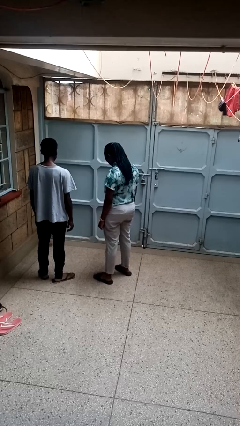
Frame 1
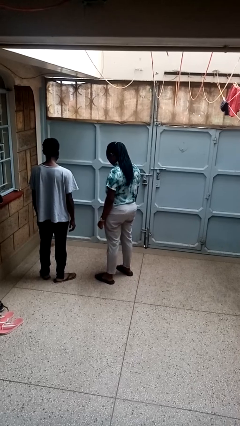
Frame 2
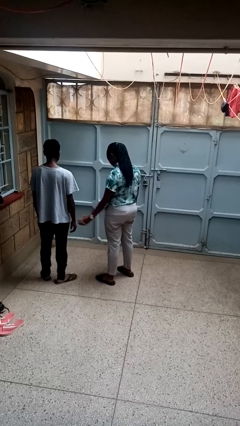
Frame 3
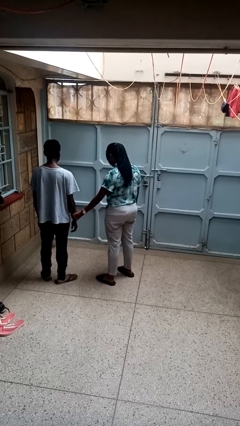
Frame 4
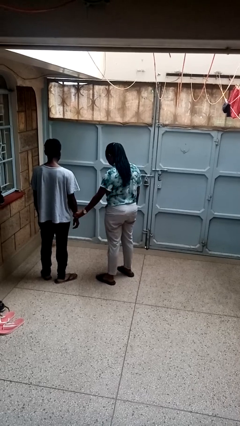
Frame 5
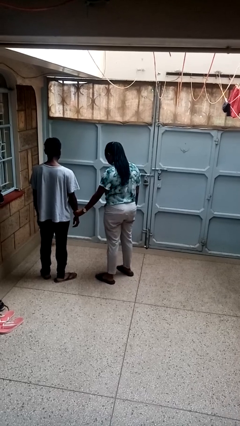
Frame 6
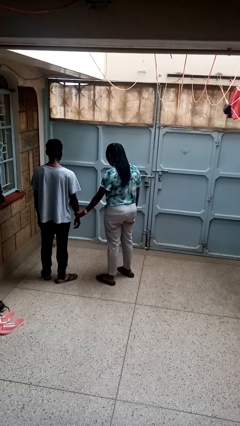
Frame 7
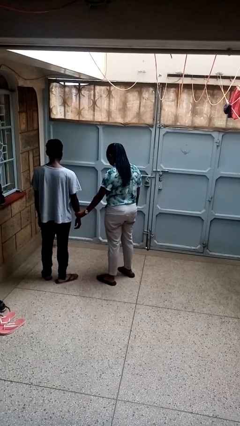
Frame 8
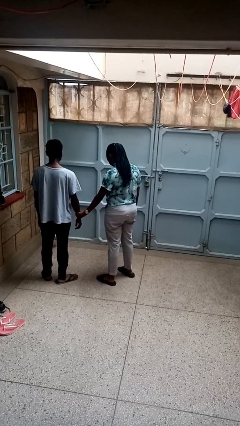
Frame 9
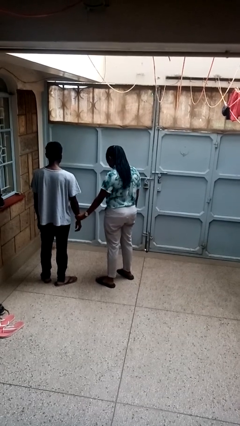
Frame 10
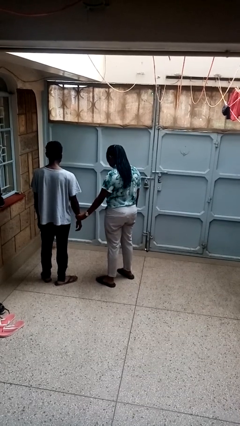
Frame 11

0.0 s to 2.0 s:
person grabs person by forearm

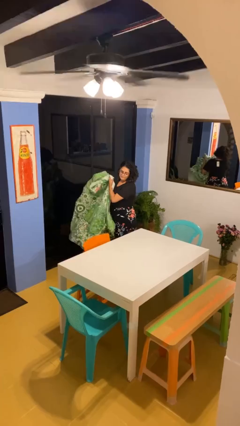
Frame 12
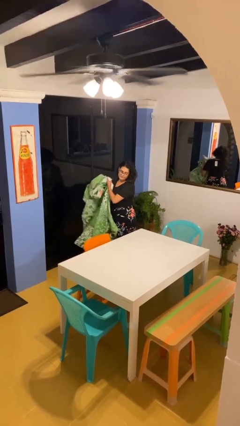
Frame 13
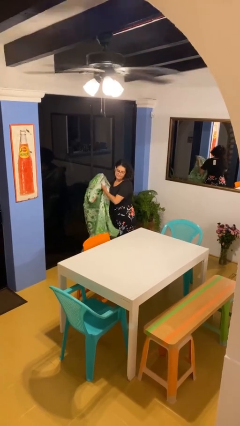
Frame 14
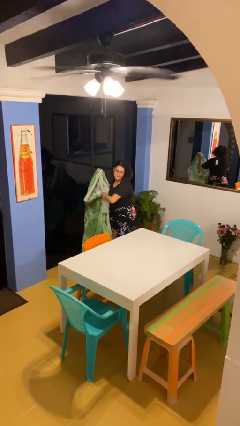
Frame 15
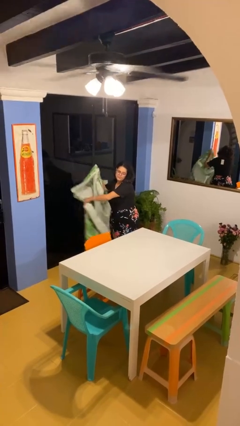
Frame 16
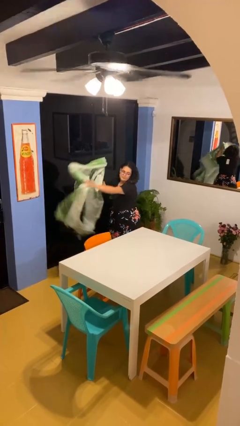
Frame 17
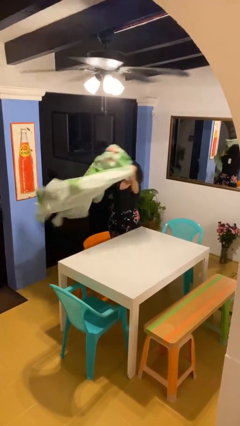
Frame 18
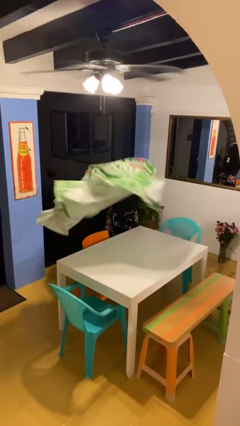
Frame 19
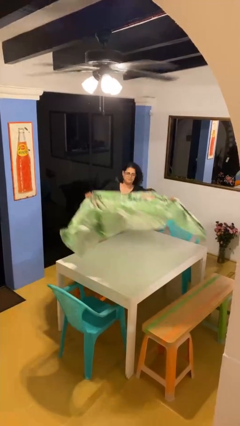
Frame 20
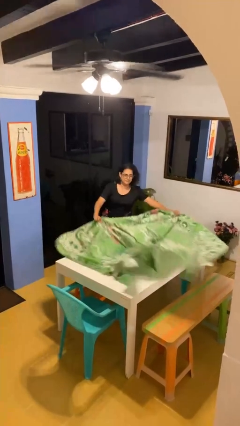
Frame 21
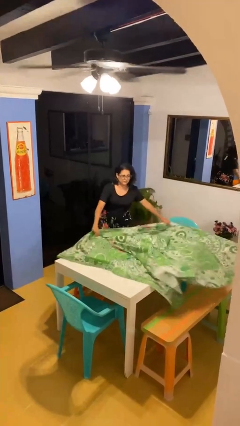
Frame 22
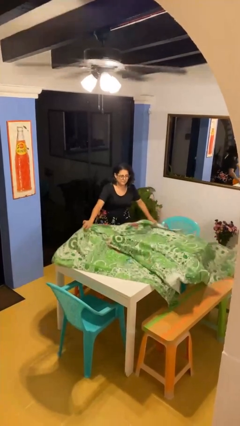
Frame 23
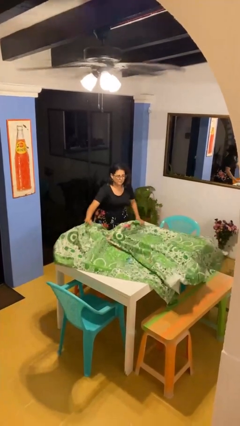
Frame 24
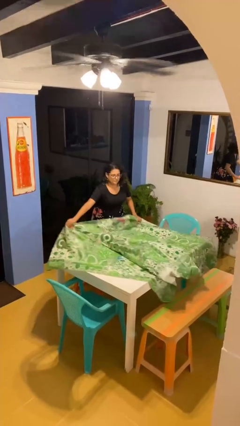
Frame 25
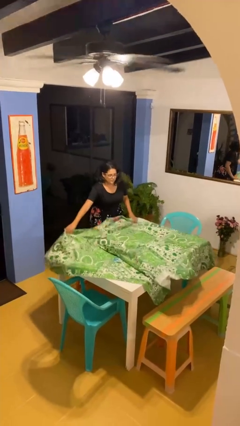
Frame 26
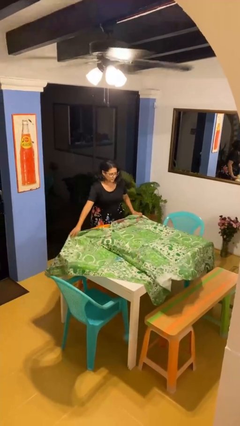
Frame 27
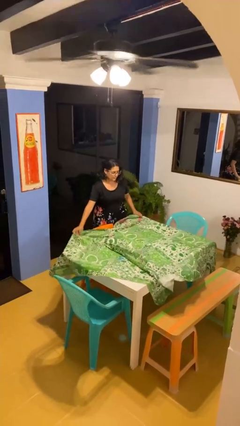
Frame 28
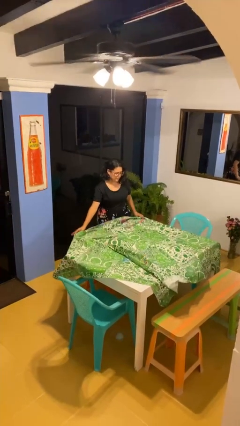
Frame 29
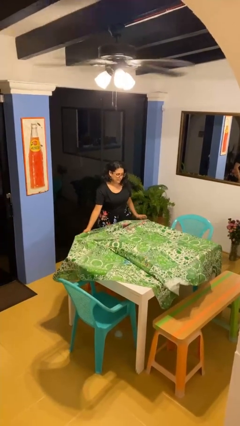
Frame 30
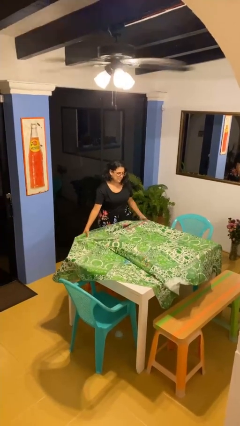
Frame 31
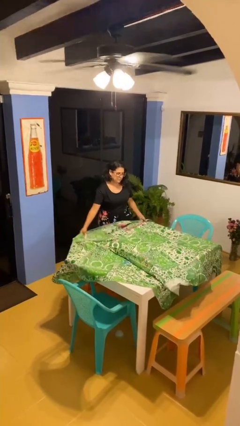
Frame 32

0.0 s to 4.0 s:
person spreads tablecloth

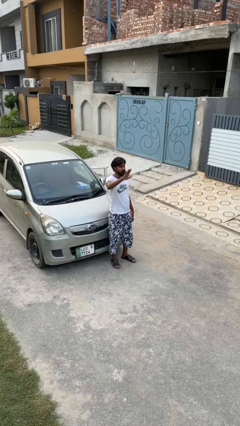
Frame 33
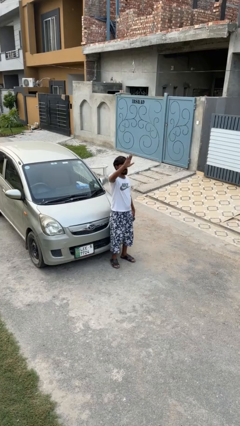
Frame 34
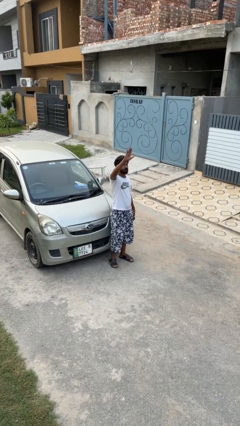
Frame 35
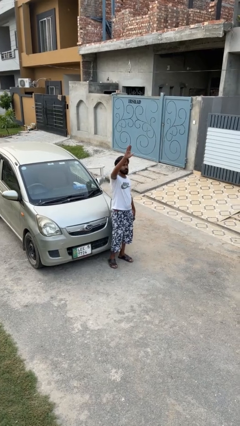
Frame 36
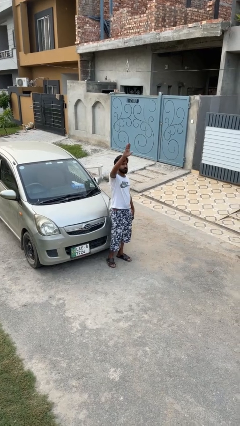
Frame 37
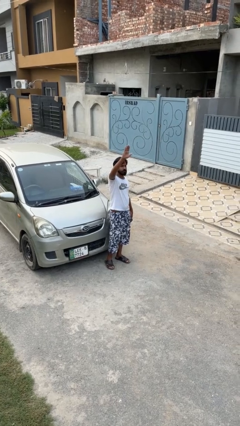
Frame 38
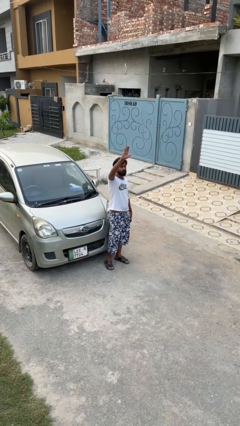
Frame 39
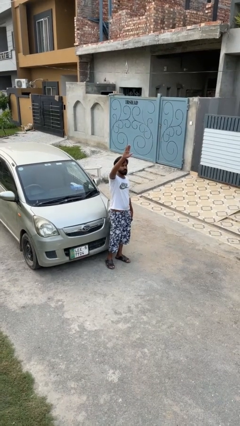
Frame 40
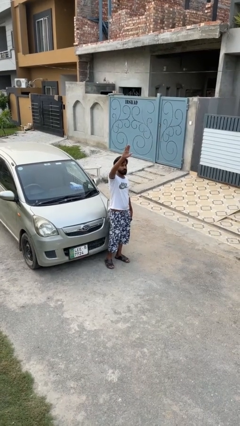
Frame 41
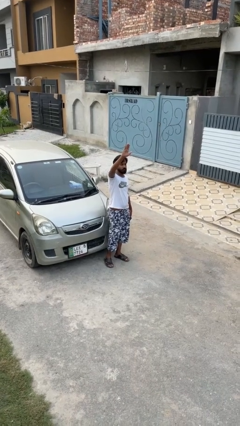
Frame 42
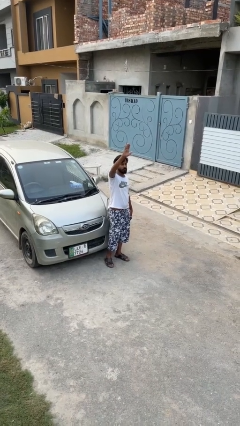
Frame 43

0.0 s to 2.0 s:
person gestures raise hand

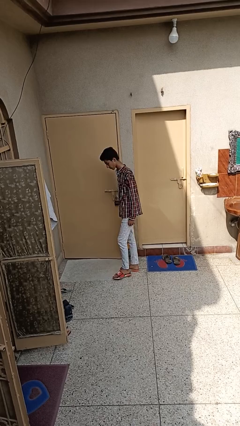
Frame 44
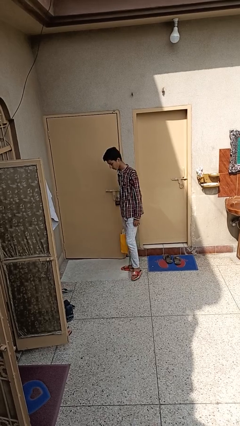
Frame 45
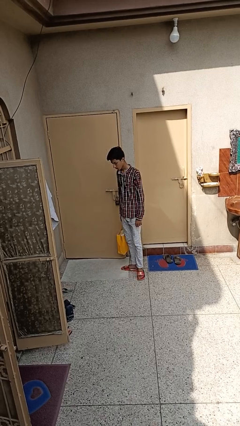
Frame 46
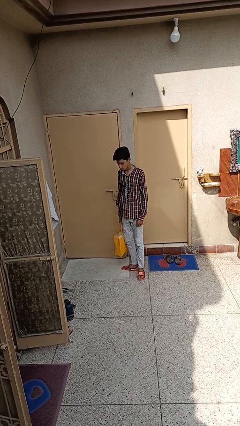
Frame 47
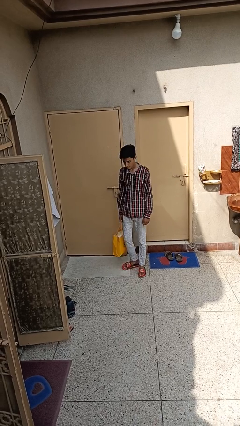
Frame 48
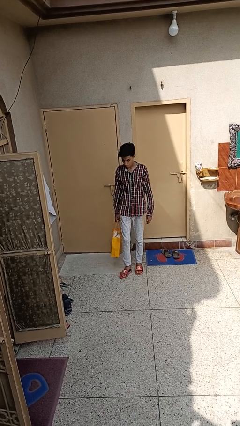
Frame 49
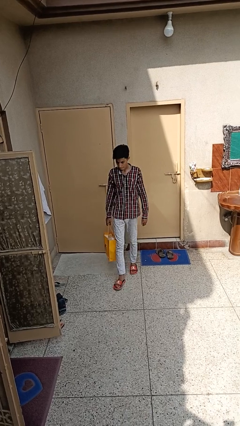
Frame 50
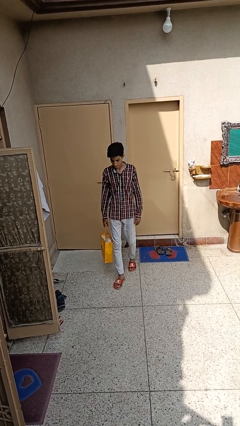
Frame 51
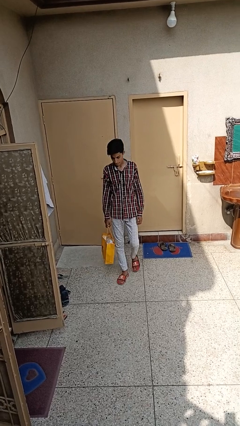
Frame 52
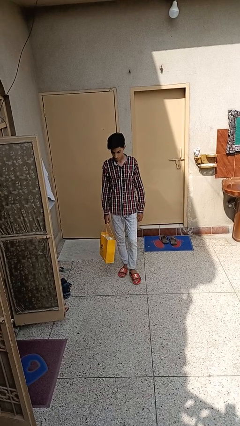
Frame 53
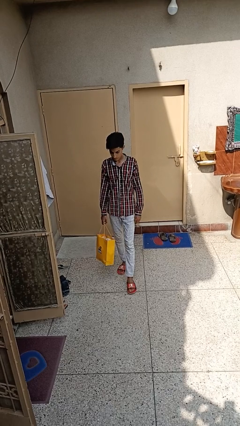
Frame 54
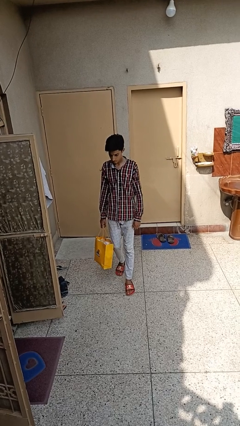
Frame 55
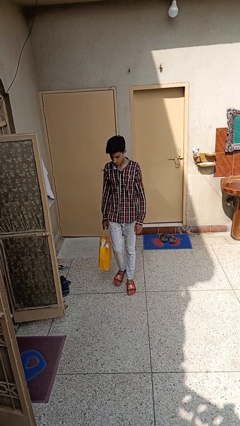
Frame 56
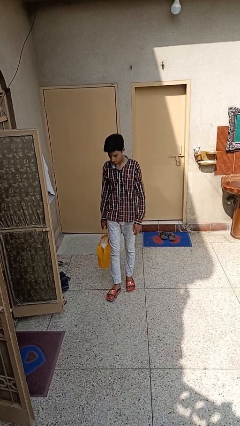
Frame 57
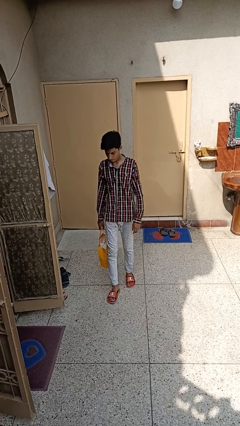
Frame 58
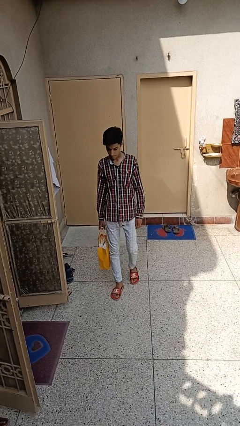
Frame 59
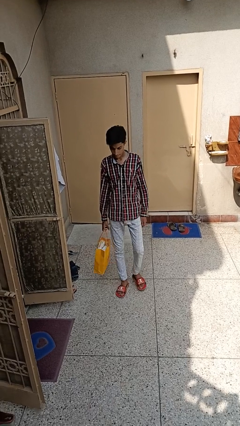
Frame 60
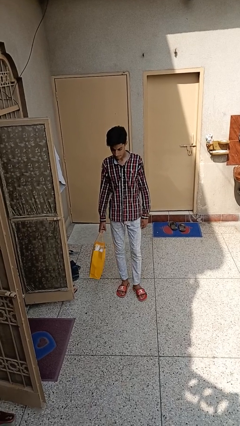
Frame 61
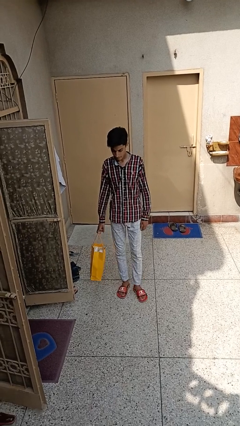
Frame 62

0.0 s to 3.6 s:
person carries groceries

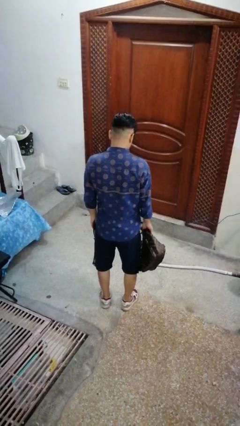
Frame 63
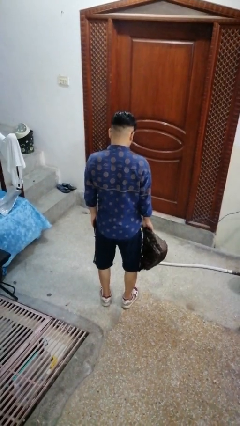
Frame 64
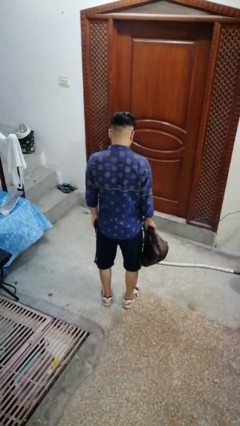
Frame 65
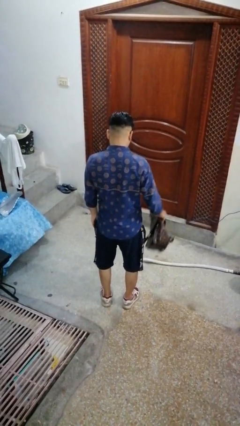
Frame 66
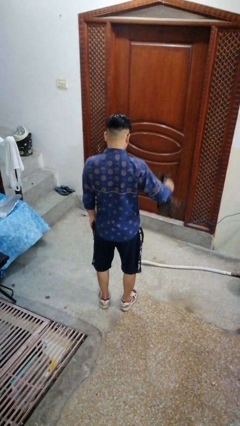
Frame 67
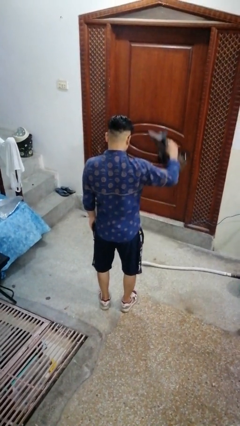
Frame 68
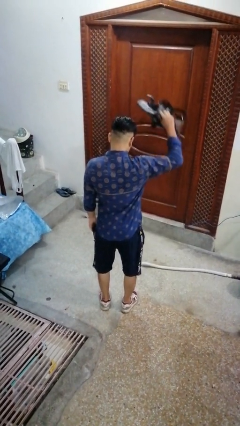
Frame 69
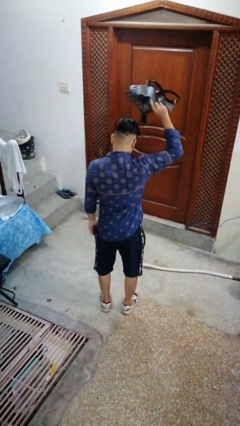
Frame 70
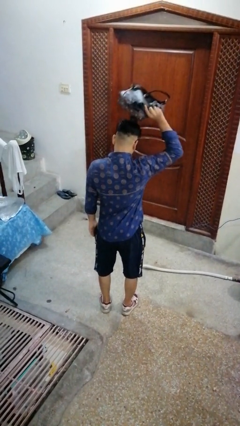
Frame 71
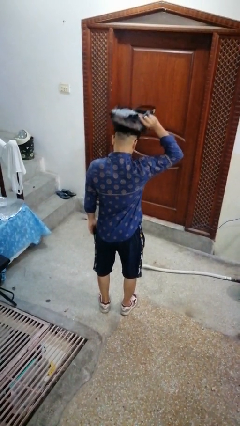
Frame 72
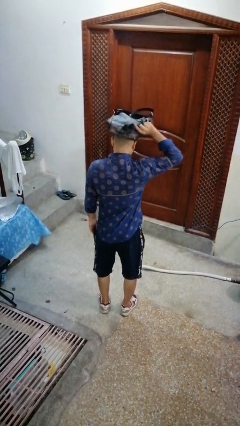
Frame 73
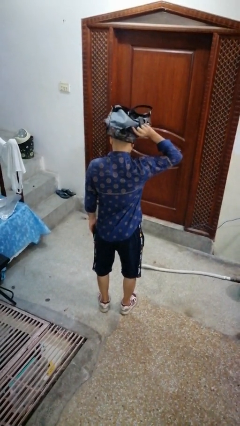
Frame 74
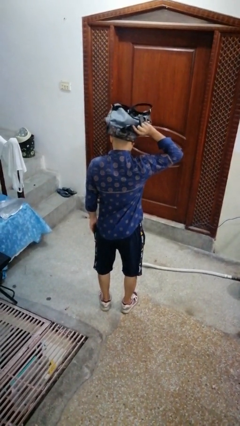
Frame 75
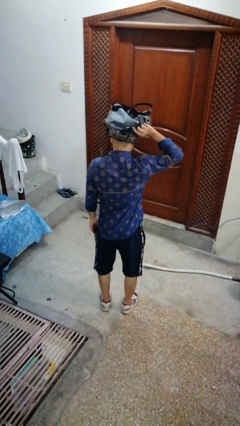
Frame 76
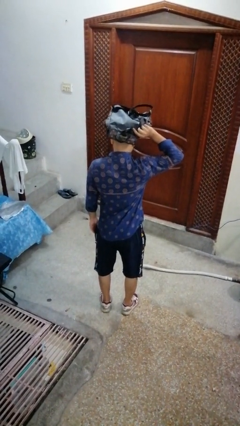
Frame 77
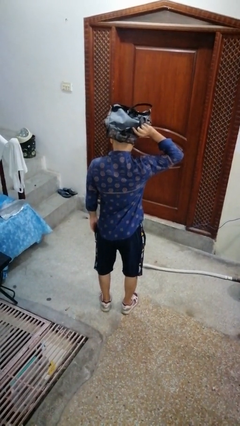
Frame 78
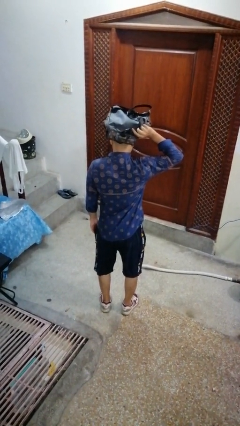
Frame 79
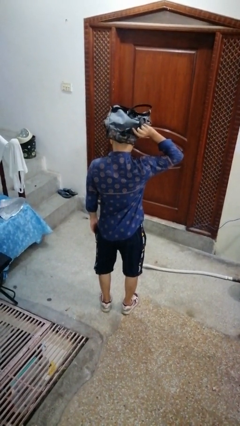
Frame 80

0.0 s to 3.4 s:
person holds object above head

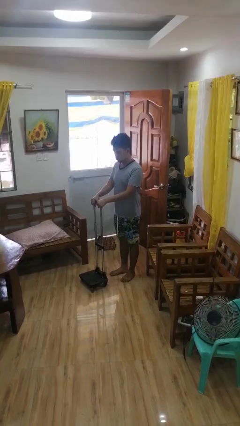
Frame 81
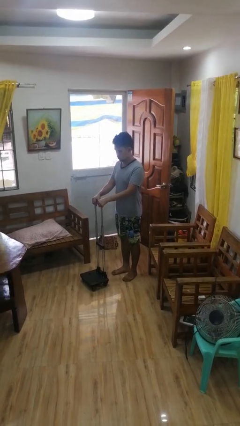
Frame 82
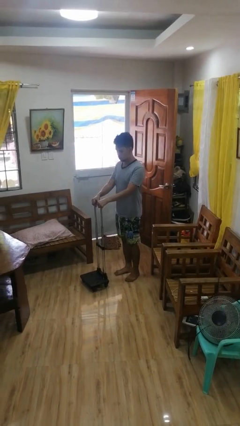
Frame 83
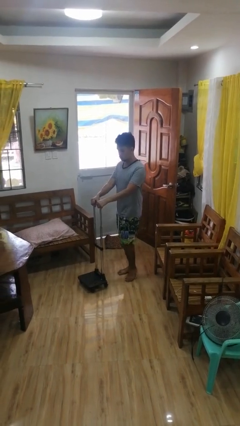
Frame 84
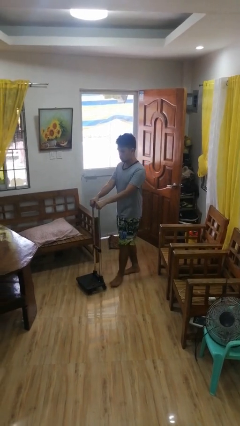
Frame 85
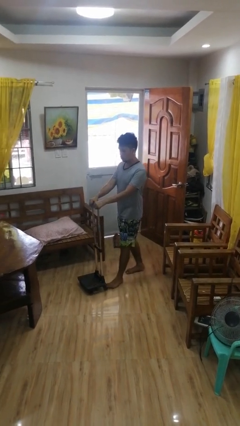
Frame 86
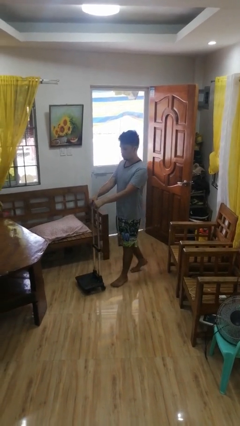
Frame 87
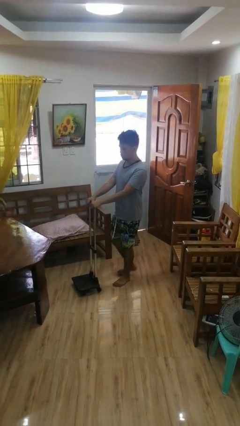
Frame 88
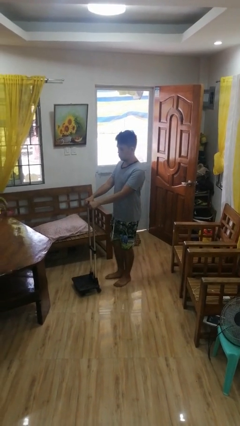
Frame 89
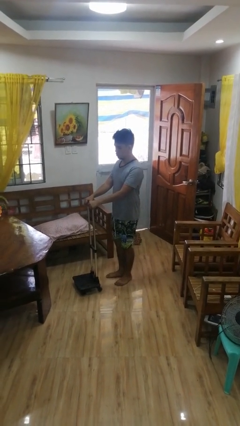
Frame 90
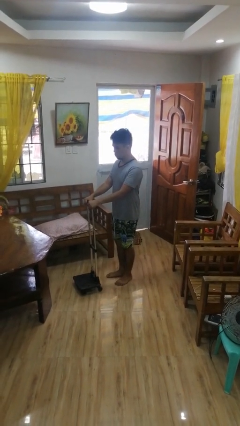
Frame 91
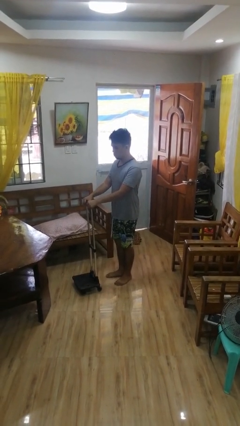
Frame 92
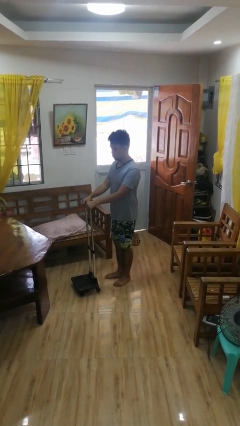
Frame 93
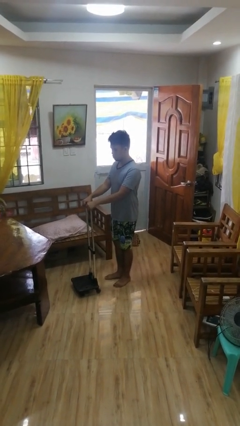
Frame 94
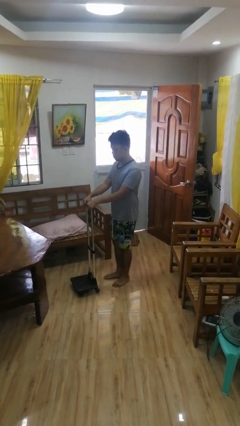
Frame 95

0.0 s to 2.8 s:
person pushes wheeled cart

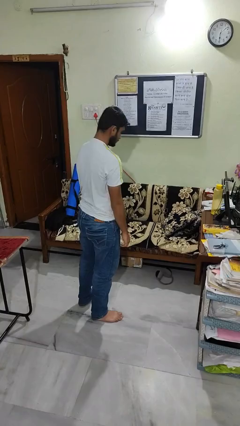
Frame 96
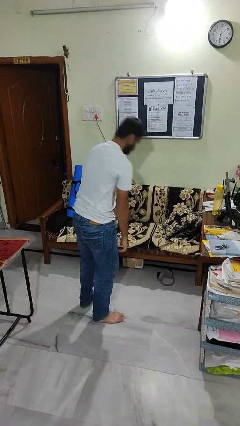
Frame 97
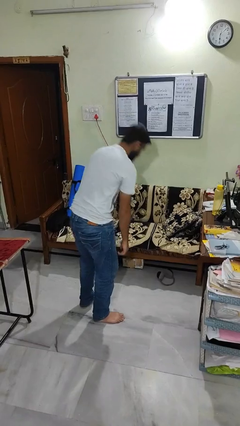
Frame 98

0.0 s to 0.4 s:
person picks up object from floor
